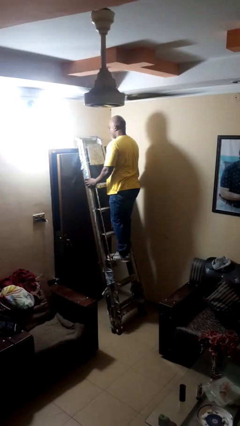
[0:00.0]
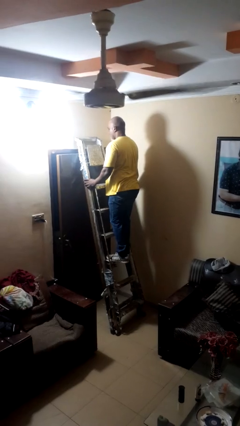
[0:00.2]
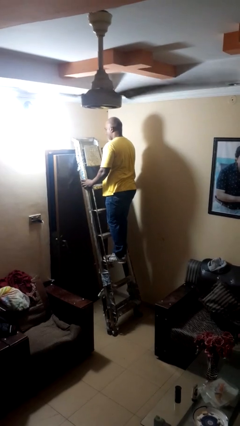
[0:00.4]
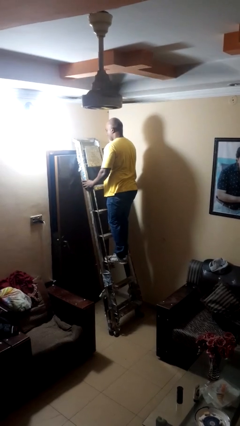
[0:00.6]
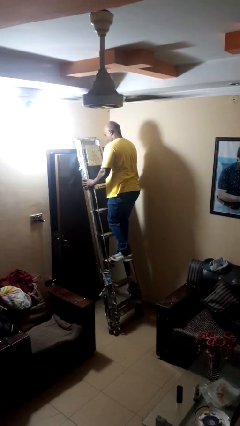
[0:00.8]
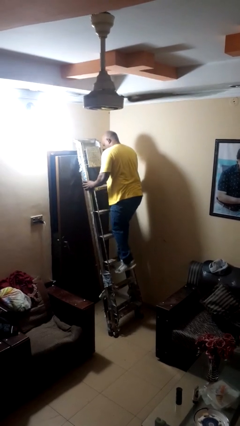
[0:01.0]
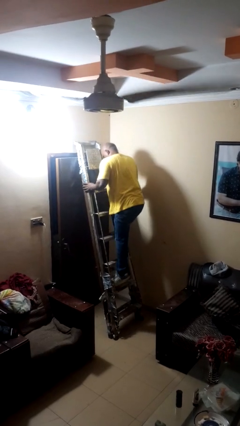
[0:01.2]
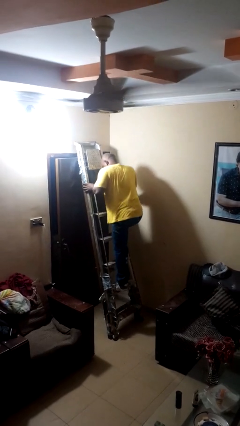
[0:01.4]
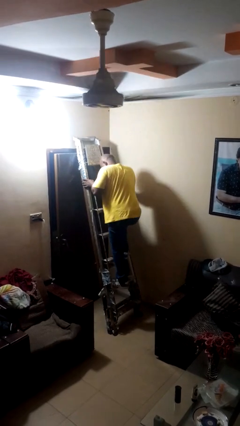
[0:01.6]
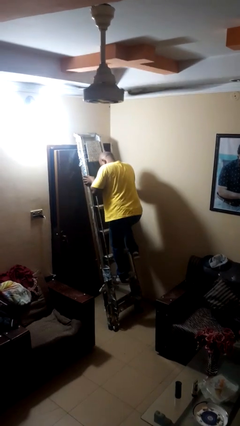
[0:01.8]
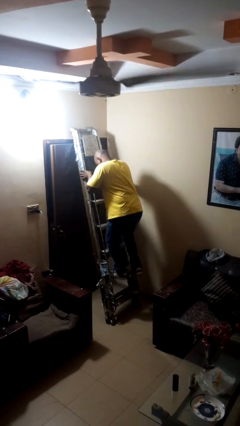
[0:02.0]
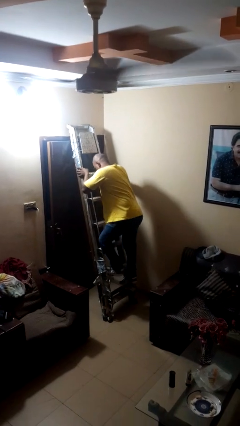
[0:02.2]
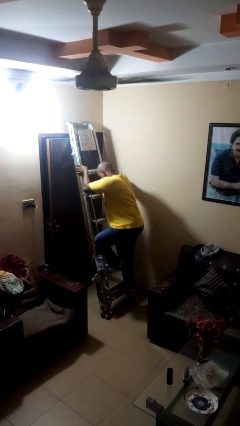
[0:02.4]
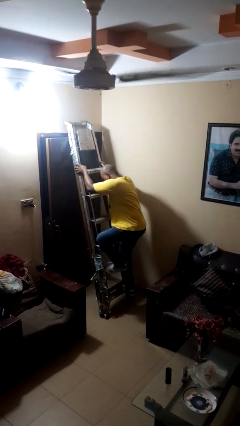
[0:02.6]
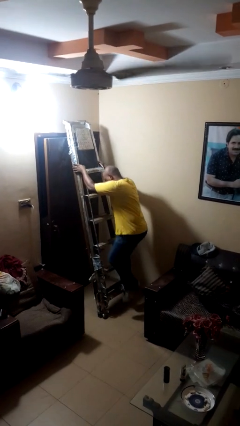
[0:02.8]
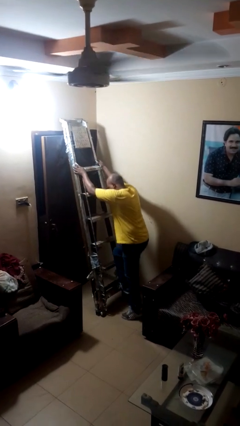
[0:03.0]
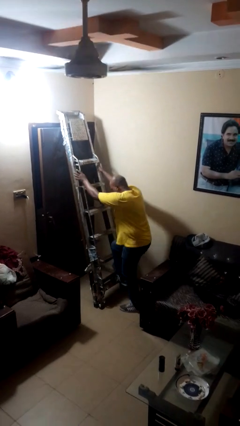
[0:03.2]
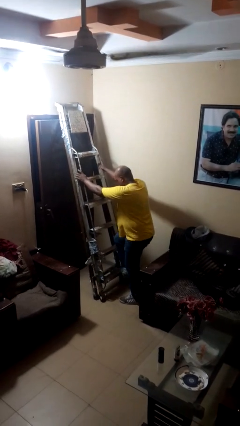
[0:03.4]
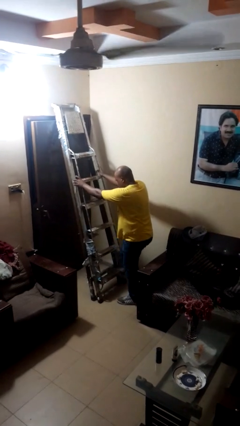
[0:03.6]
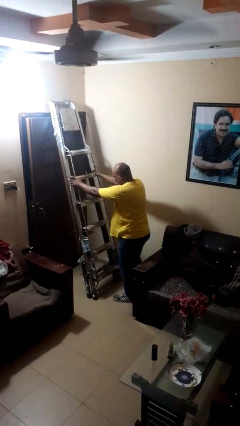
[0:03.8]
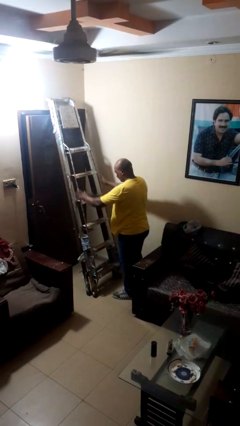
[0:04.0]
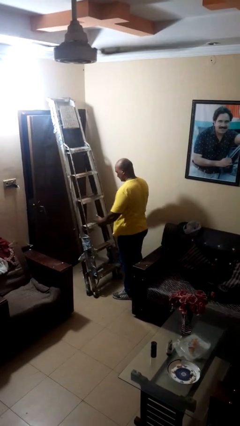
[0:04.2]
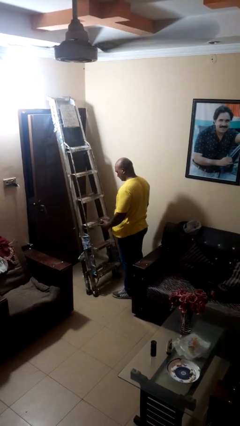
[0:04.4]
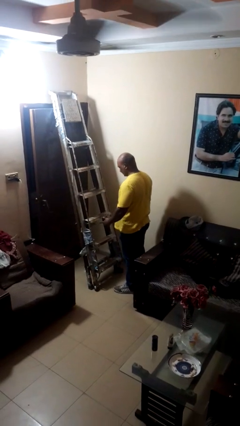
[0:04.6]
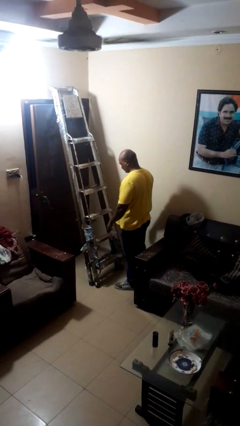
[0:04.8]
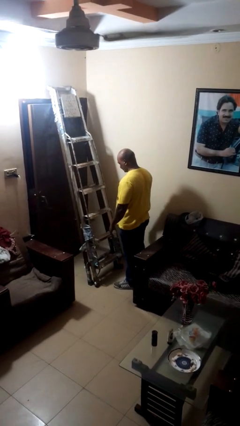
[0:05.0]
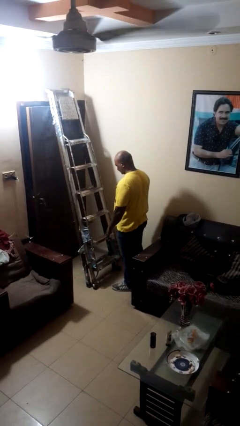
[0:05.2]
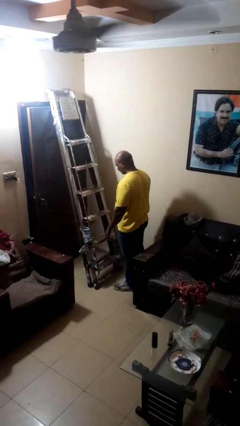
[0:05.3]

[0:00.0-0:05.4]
person climbs down stairs

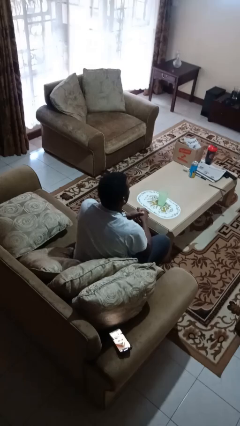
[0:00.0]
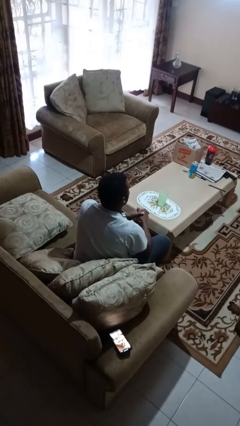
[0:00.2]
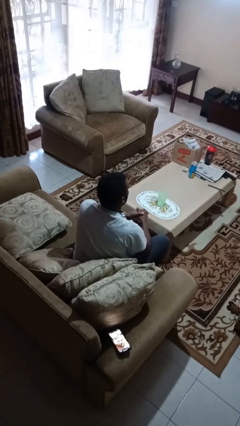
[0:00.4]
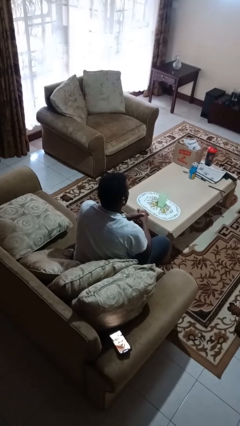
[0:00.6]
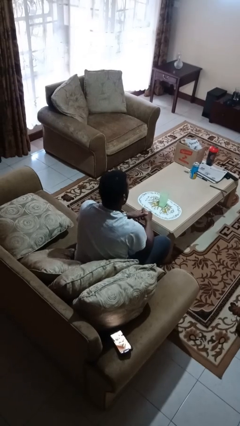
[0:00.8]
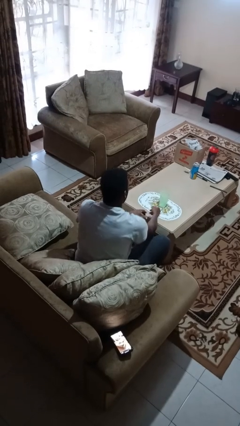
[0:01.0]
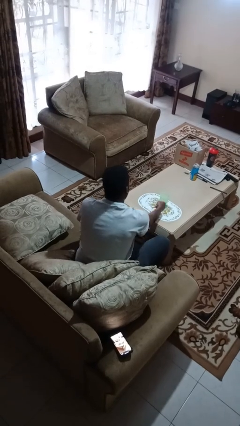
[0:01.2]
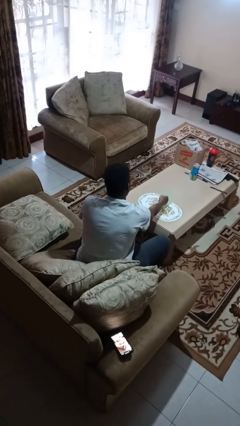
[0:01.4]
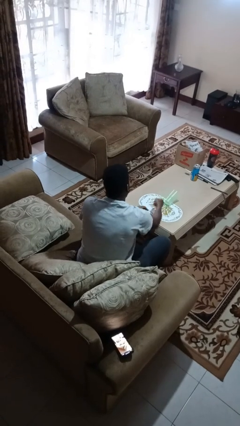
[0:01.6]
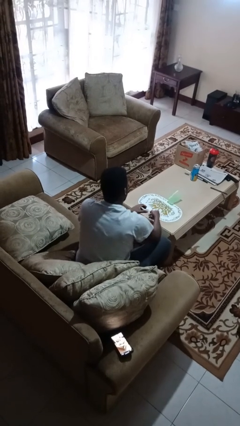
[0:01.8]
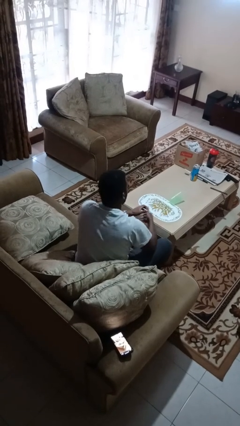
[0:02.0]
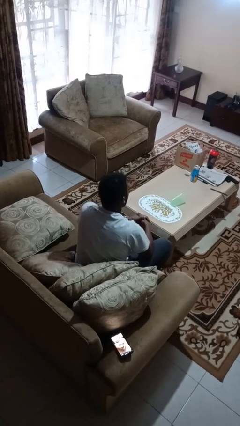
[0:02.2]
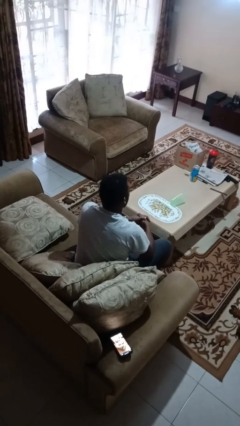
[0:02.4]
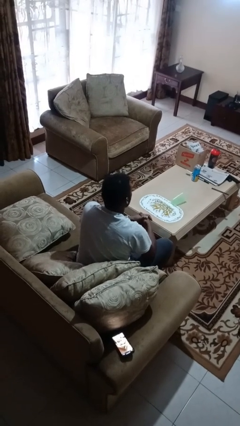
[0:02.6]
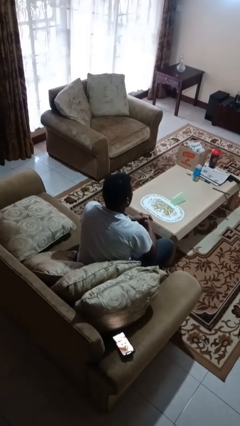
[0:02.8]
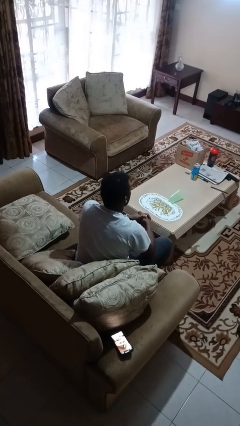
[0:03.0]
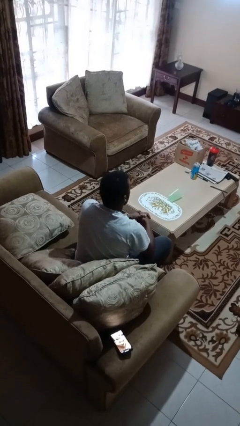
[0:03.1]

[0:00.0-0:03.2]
person knocks over glass

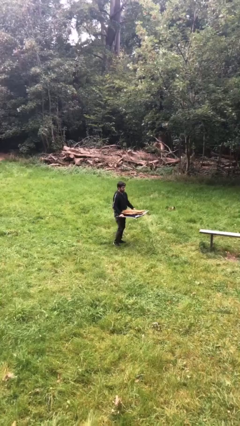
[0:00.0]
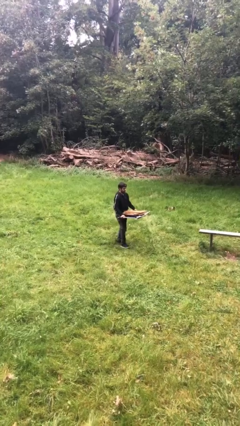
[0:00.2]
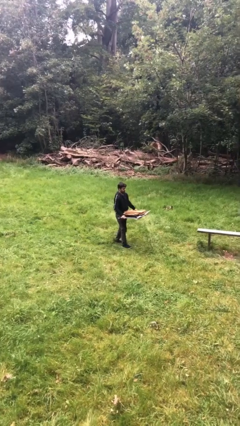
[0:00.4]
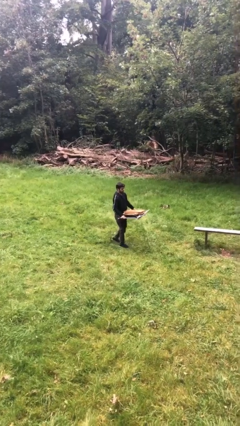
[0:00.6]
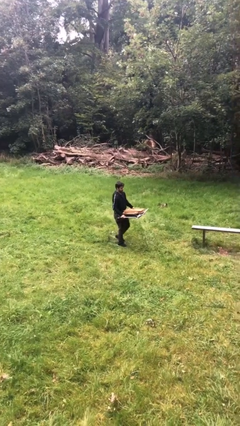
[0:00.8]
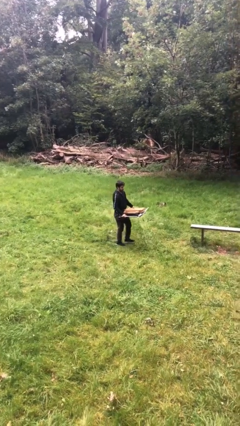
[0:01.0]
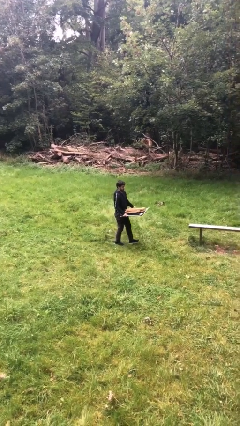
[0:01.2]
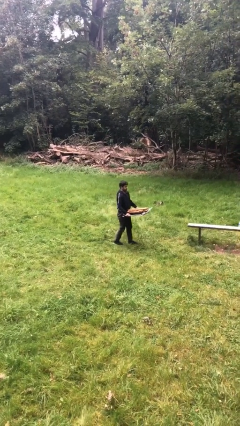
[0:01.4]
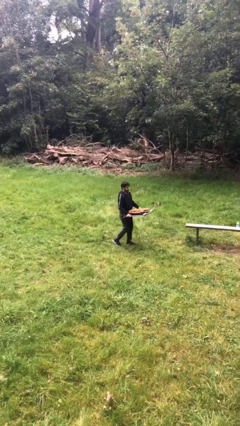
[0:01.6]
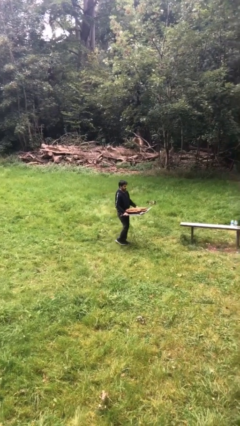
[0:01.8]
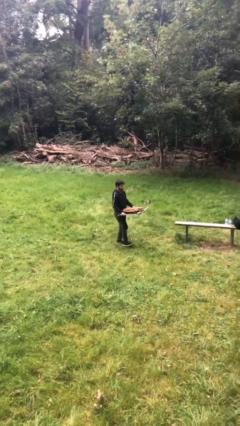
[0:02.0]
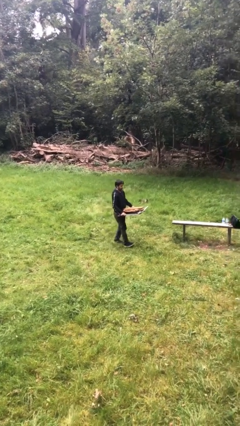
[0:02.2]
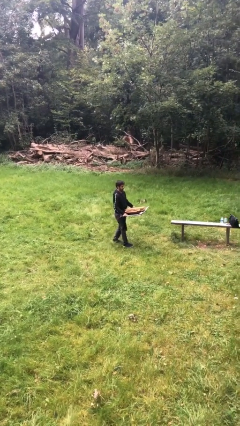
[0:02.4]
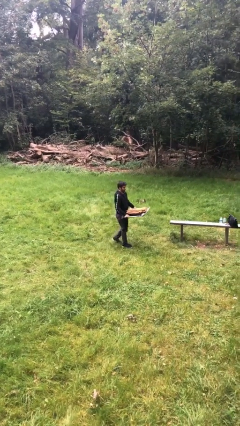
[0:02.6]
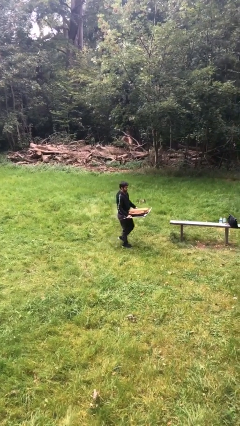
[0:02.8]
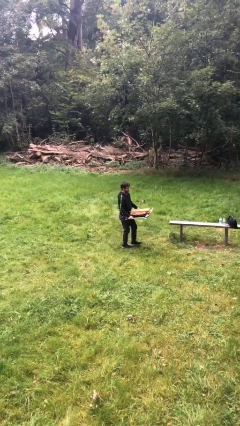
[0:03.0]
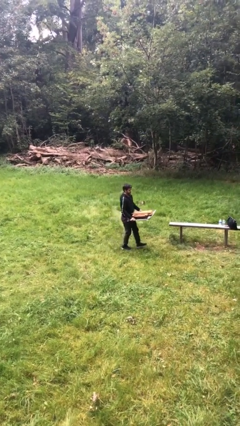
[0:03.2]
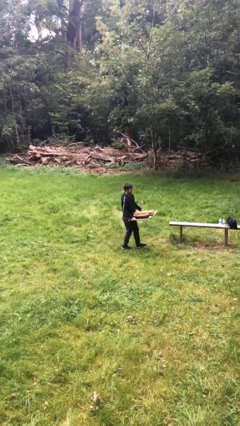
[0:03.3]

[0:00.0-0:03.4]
person carries heavy object

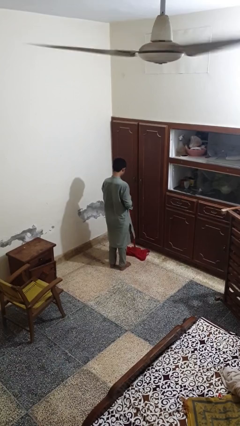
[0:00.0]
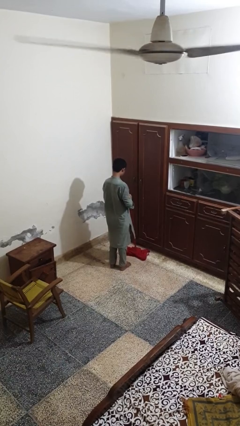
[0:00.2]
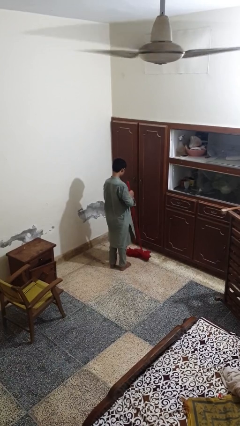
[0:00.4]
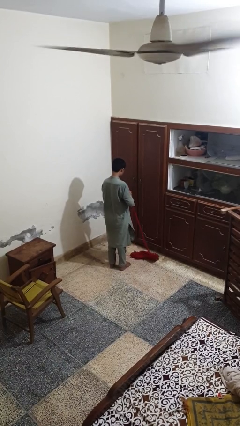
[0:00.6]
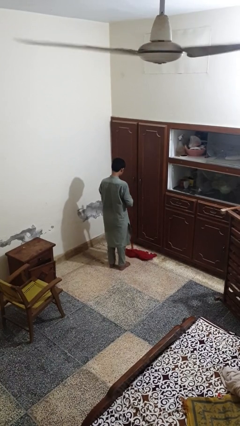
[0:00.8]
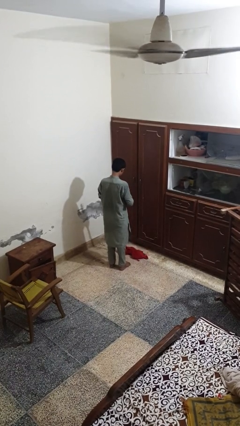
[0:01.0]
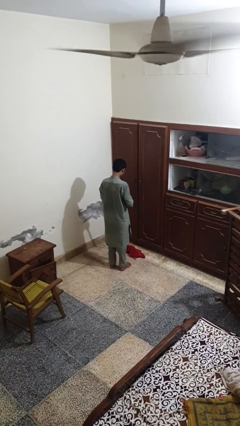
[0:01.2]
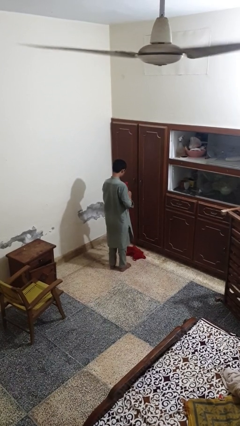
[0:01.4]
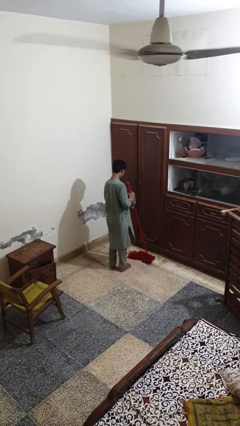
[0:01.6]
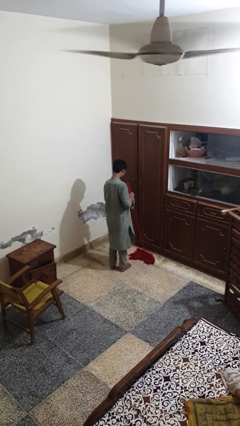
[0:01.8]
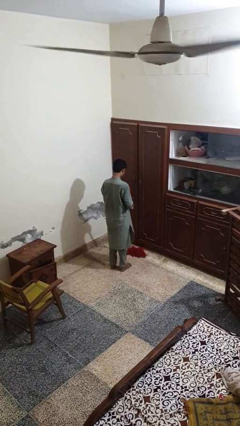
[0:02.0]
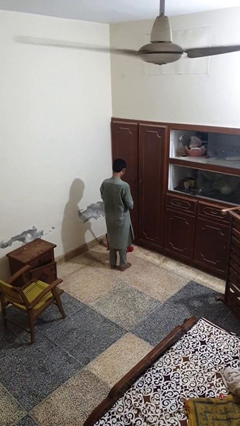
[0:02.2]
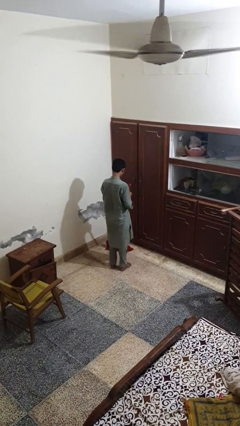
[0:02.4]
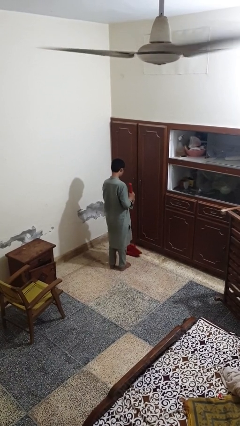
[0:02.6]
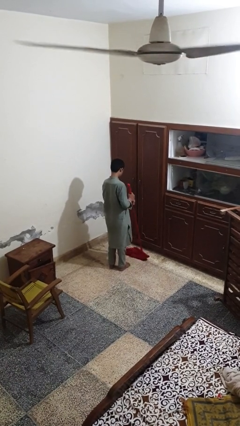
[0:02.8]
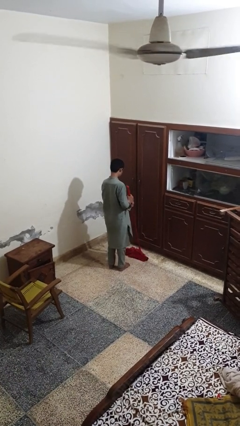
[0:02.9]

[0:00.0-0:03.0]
person mops

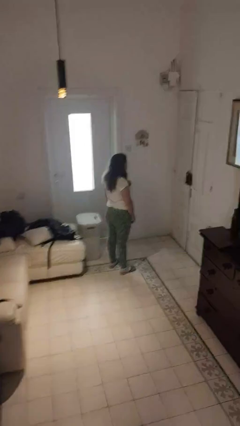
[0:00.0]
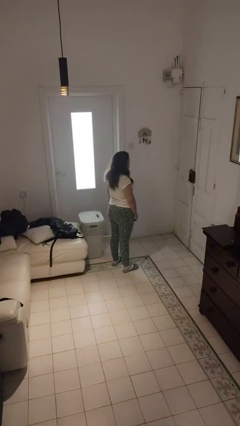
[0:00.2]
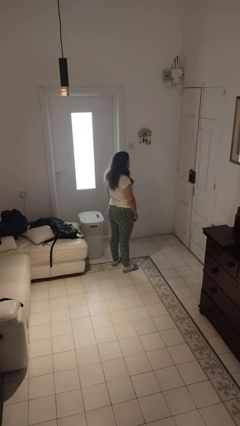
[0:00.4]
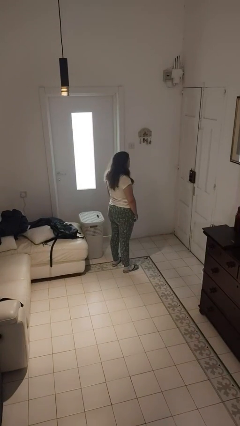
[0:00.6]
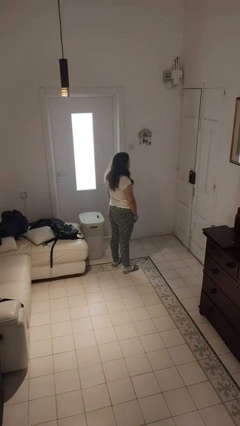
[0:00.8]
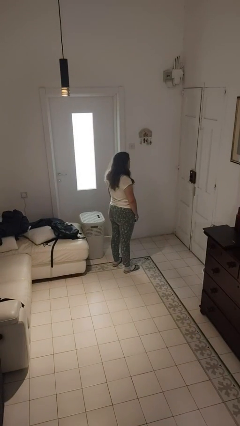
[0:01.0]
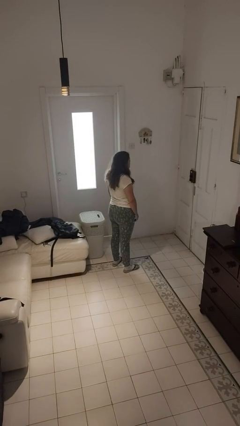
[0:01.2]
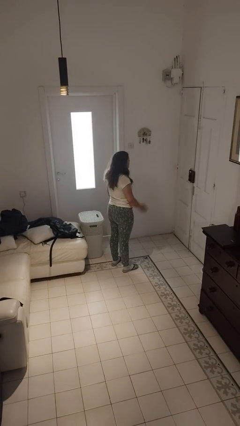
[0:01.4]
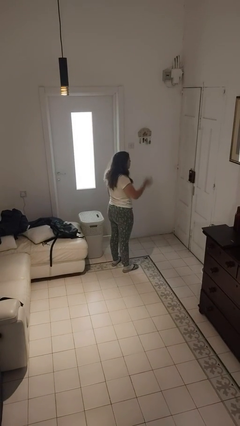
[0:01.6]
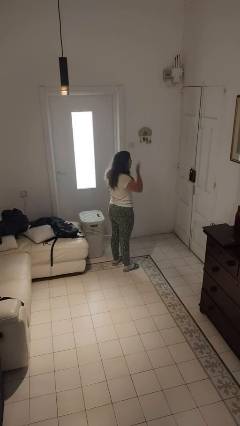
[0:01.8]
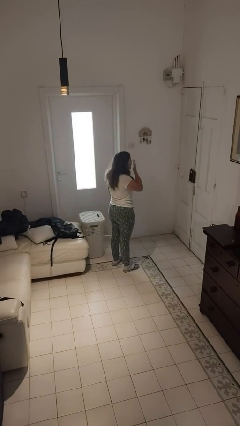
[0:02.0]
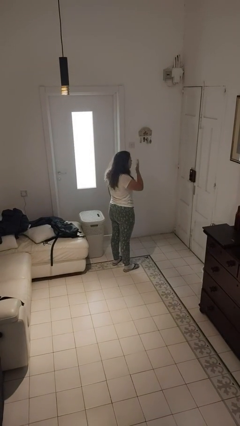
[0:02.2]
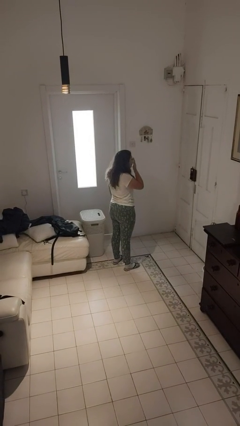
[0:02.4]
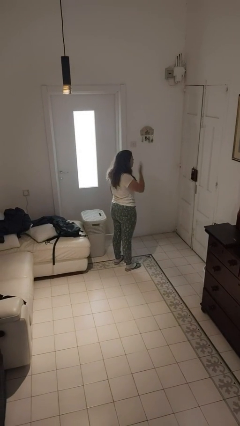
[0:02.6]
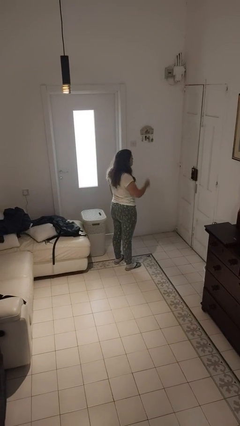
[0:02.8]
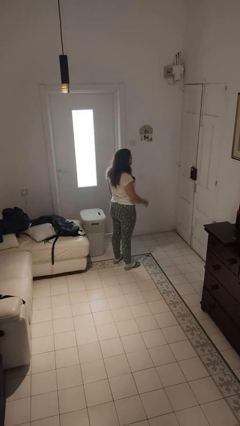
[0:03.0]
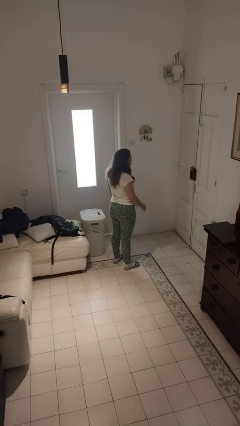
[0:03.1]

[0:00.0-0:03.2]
person yawns
